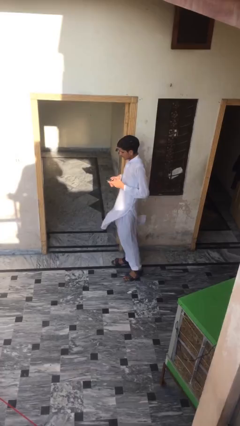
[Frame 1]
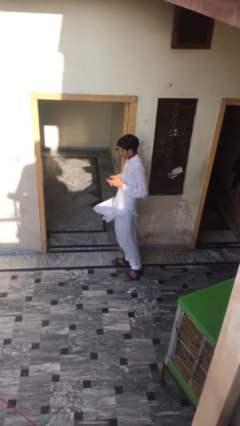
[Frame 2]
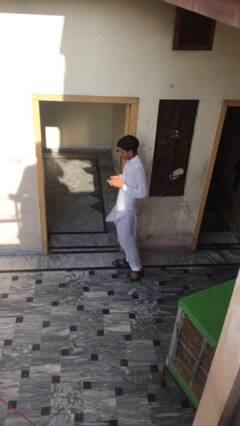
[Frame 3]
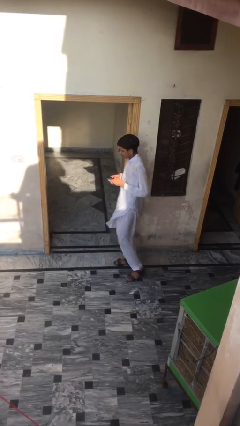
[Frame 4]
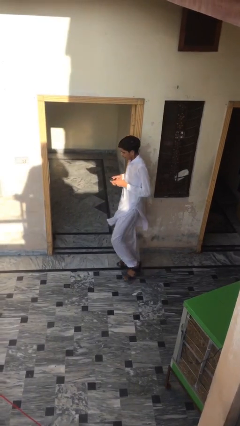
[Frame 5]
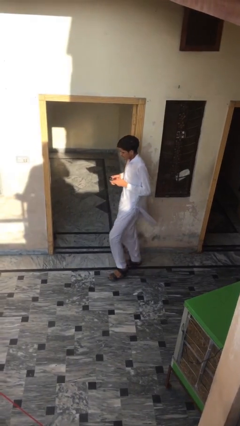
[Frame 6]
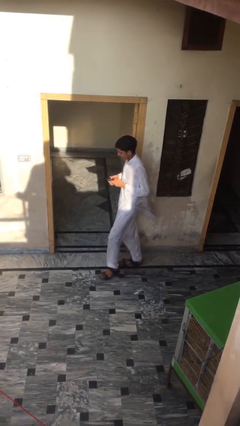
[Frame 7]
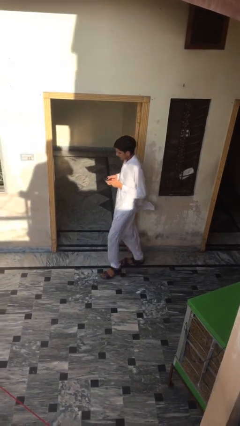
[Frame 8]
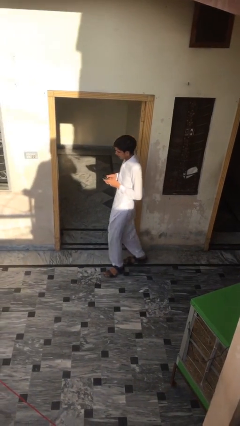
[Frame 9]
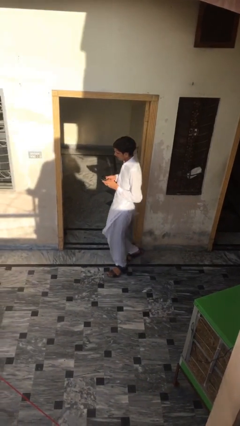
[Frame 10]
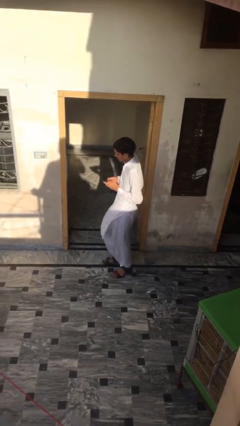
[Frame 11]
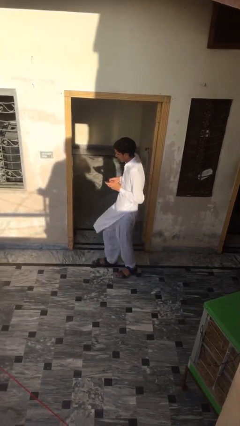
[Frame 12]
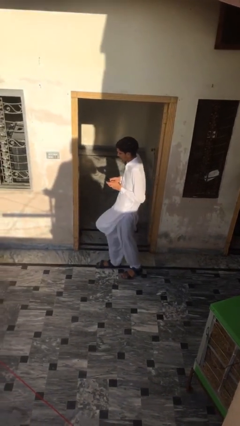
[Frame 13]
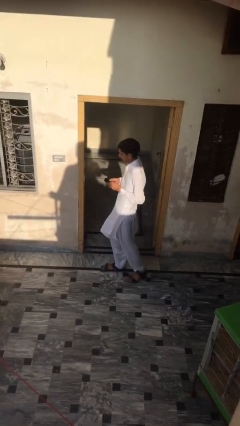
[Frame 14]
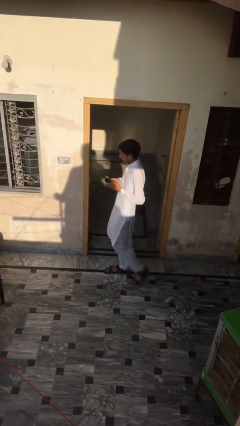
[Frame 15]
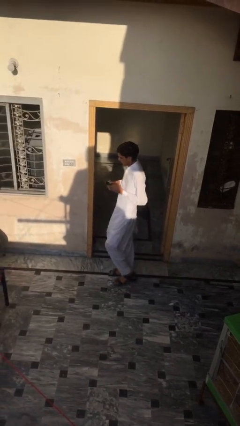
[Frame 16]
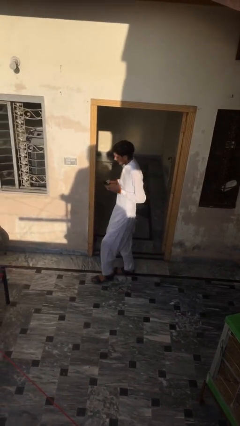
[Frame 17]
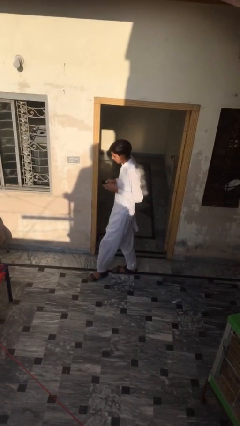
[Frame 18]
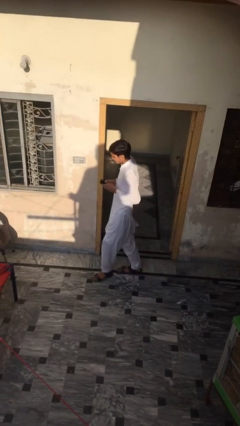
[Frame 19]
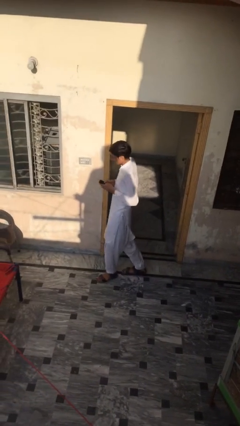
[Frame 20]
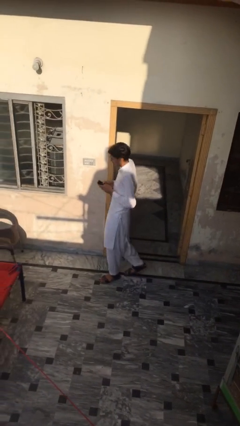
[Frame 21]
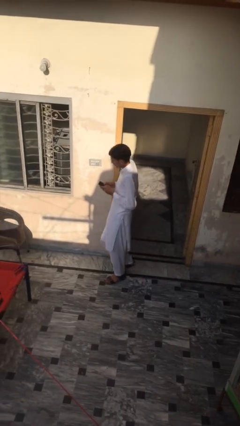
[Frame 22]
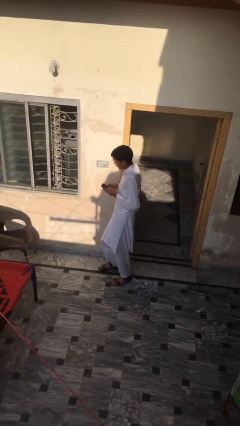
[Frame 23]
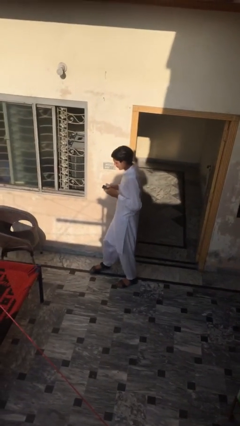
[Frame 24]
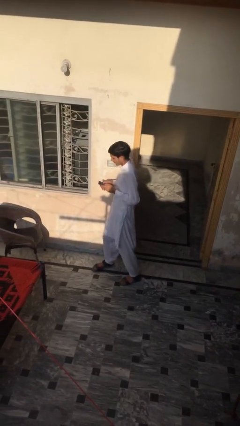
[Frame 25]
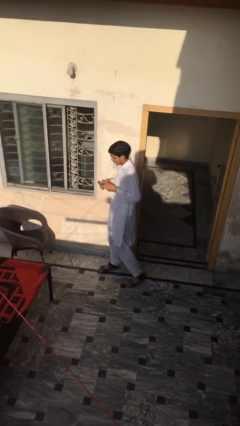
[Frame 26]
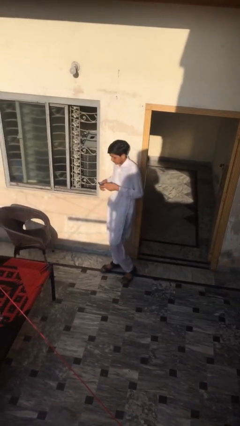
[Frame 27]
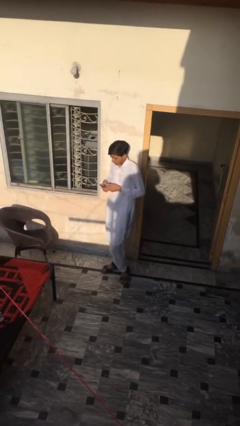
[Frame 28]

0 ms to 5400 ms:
person texts on phone

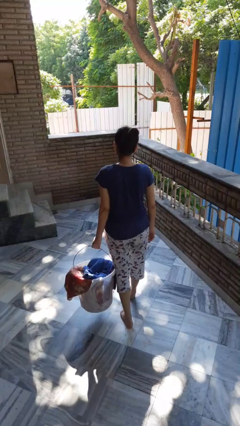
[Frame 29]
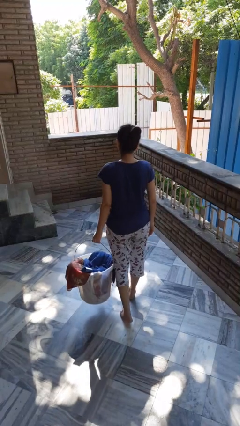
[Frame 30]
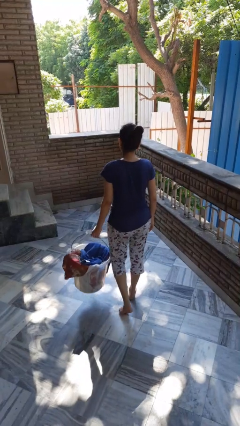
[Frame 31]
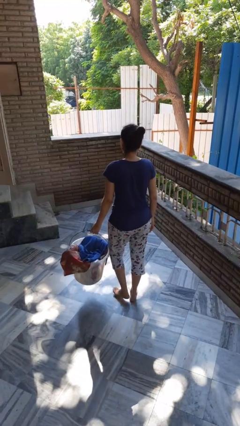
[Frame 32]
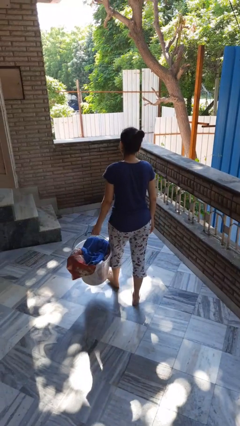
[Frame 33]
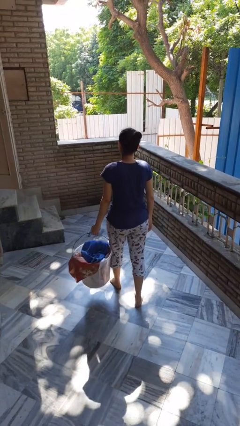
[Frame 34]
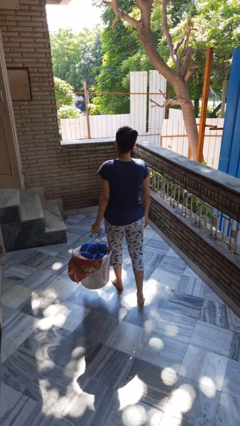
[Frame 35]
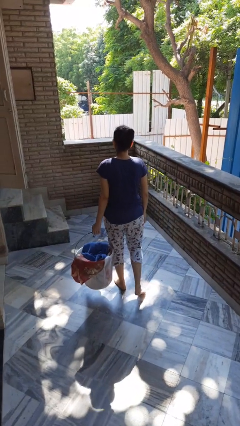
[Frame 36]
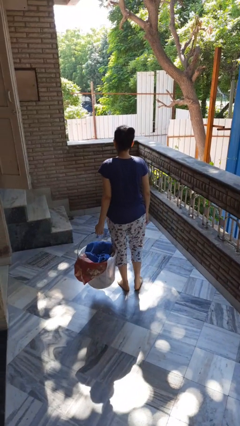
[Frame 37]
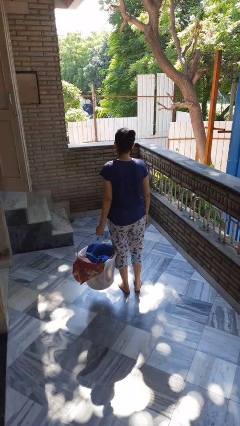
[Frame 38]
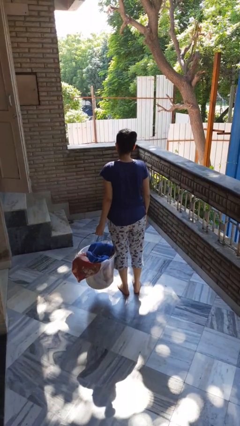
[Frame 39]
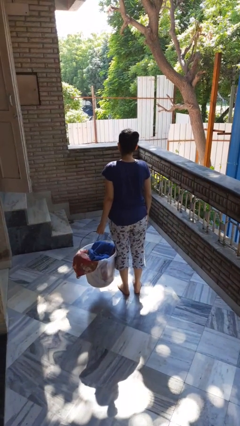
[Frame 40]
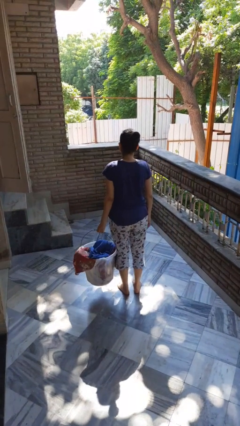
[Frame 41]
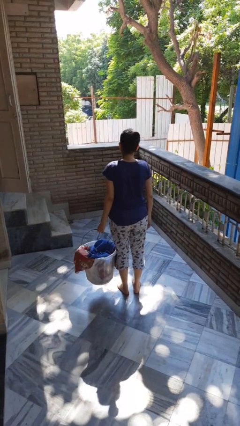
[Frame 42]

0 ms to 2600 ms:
person carries laundry basket

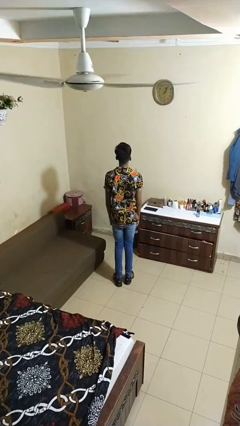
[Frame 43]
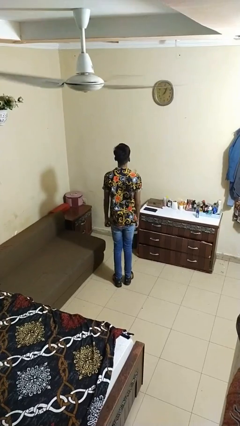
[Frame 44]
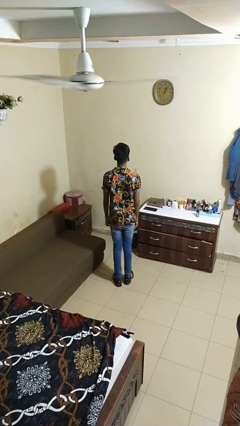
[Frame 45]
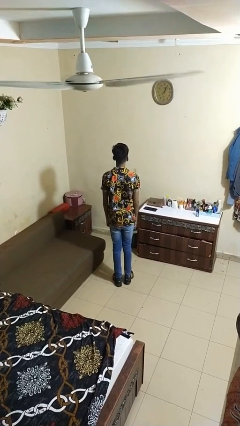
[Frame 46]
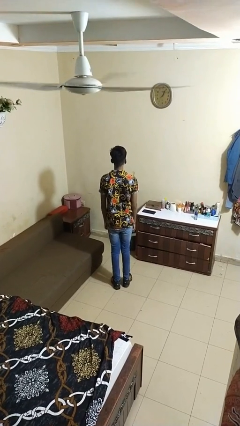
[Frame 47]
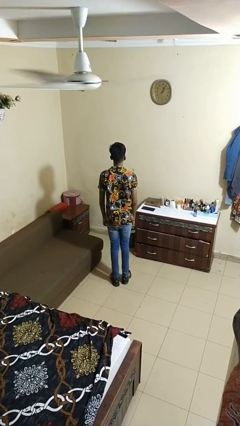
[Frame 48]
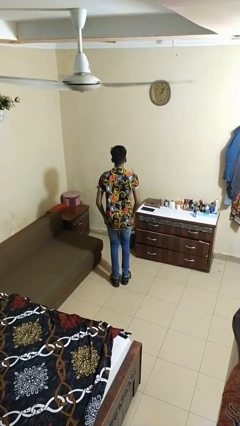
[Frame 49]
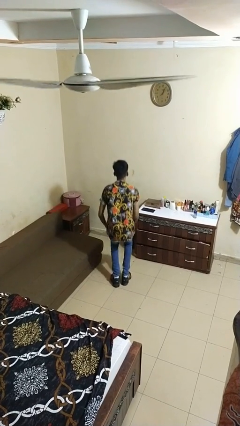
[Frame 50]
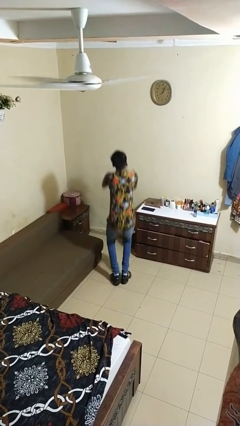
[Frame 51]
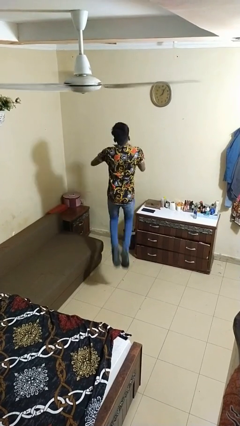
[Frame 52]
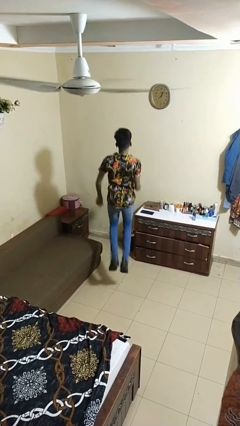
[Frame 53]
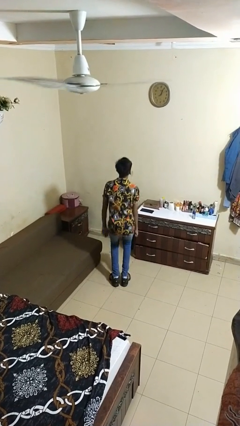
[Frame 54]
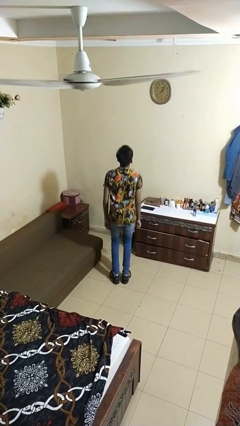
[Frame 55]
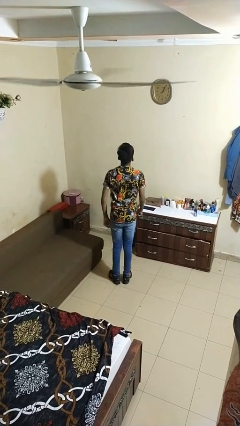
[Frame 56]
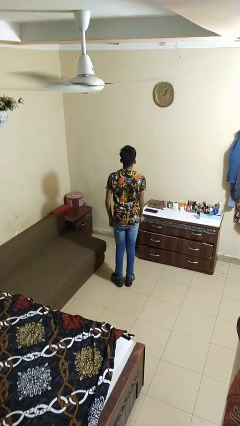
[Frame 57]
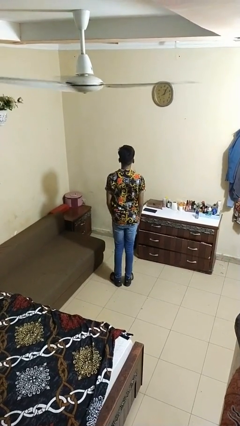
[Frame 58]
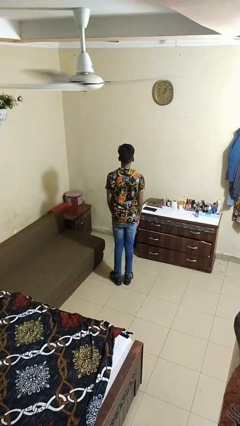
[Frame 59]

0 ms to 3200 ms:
person jumps

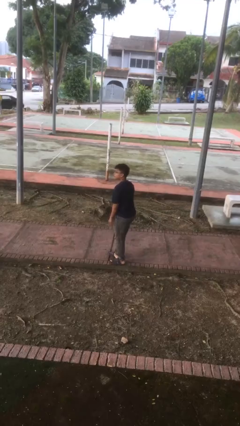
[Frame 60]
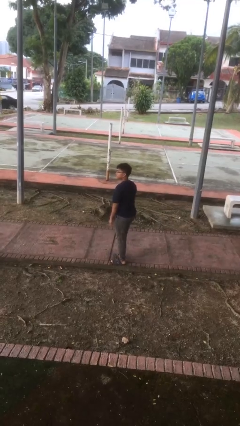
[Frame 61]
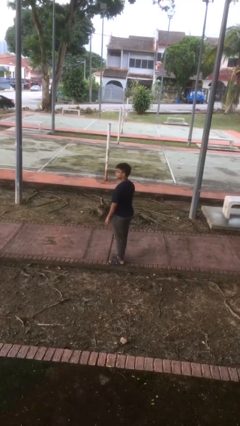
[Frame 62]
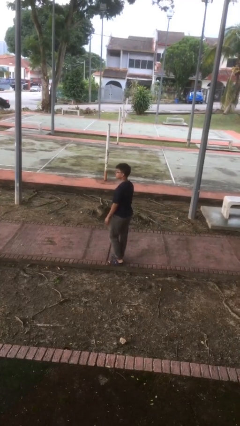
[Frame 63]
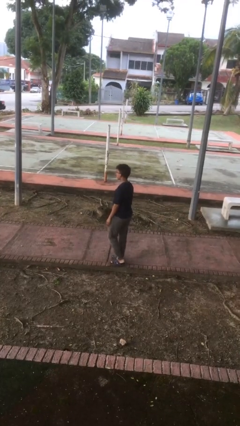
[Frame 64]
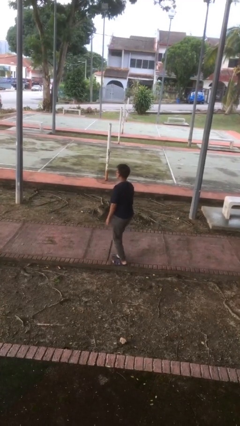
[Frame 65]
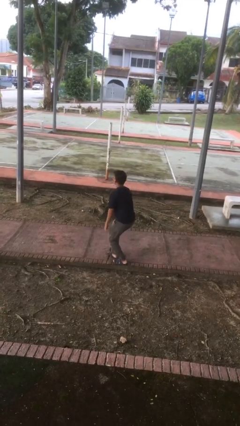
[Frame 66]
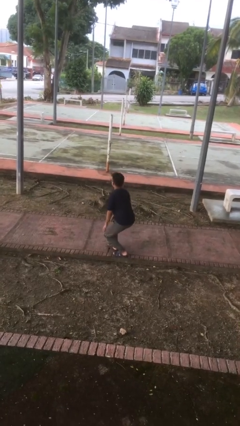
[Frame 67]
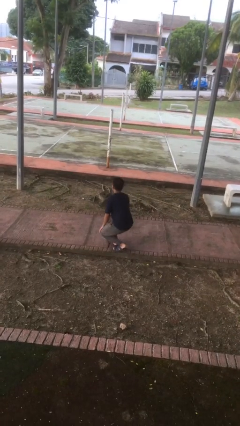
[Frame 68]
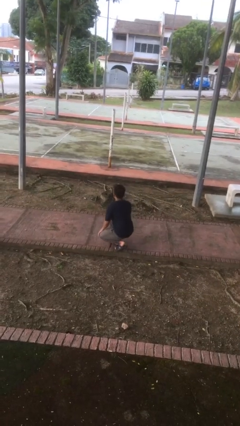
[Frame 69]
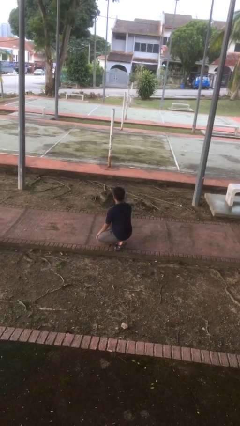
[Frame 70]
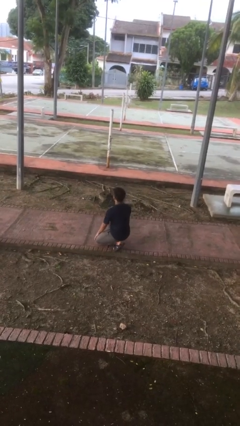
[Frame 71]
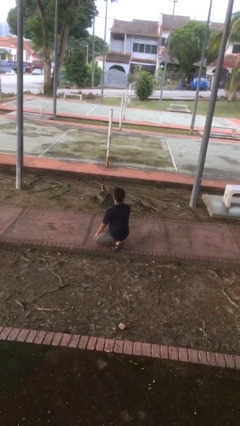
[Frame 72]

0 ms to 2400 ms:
person kneels

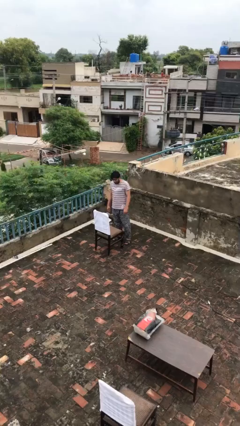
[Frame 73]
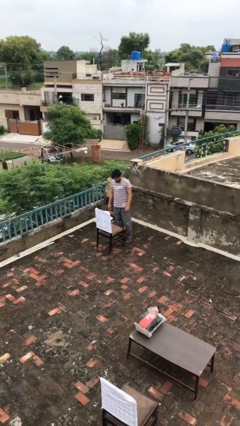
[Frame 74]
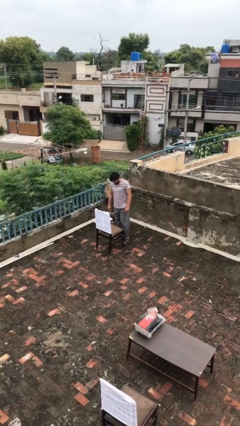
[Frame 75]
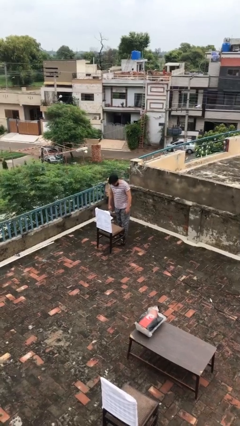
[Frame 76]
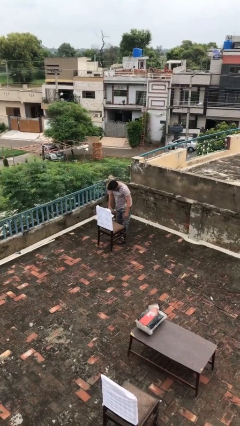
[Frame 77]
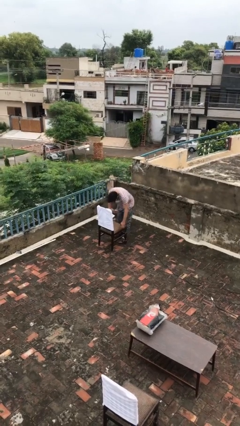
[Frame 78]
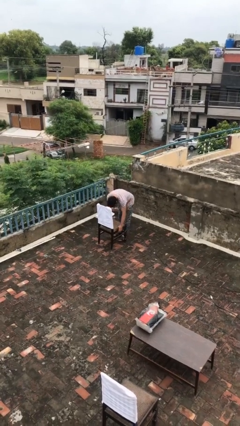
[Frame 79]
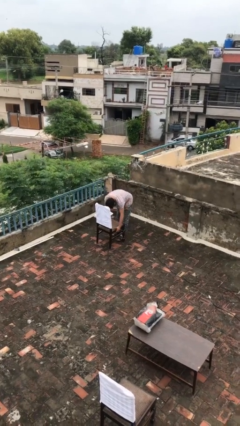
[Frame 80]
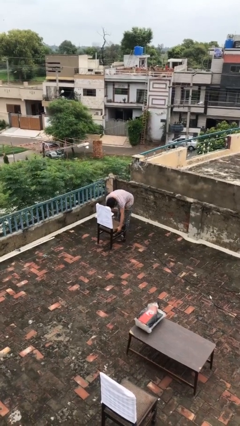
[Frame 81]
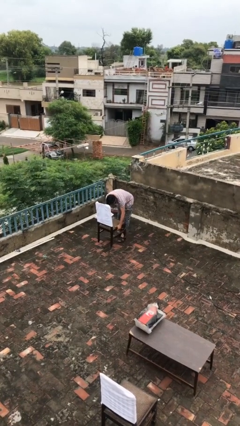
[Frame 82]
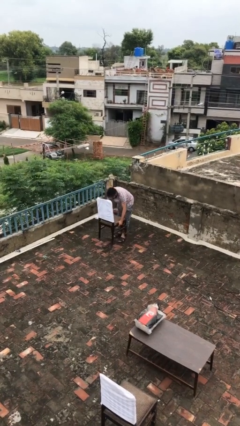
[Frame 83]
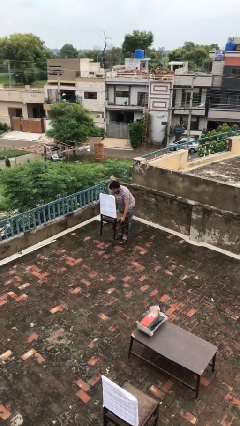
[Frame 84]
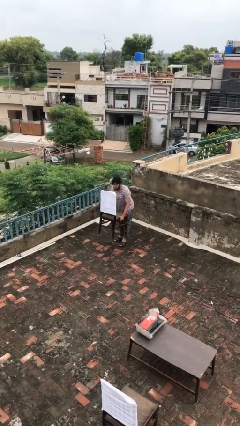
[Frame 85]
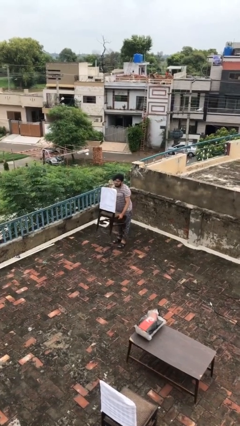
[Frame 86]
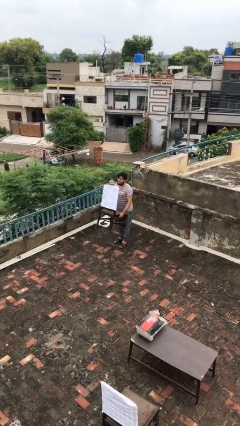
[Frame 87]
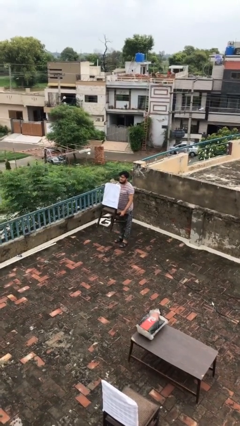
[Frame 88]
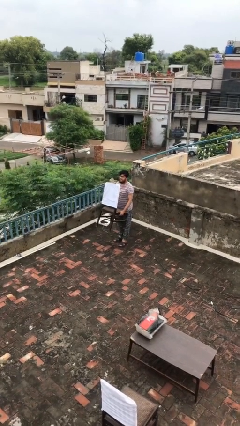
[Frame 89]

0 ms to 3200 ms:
person picks up object from floor

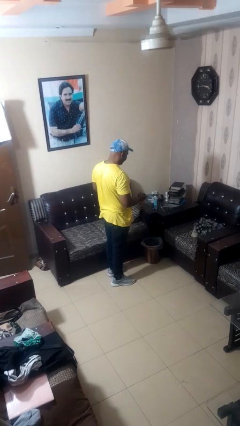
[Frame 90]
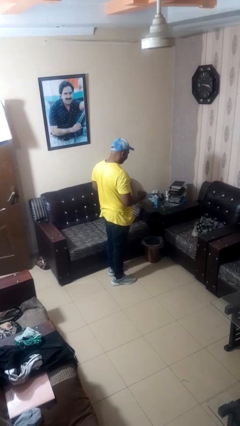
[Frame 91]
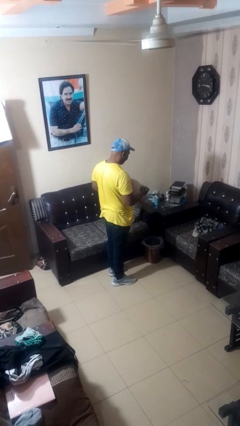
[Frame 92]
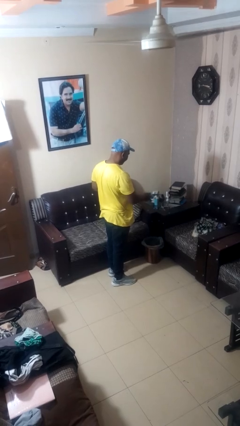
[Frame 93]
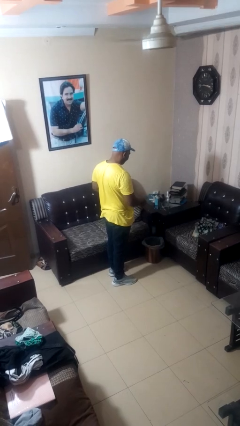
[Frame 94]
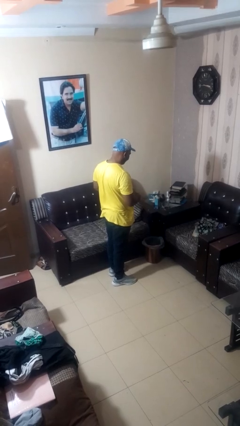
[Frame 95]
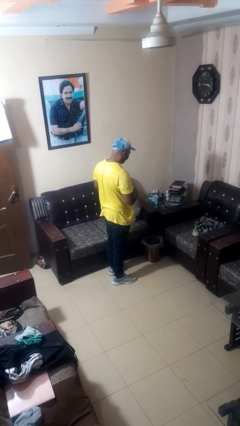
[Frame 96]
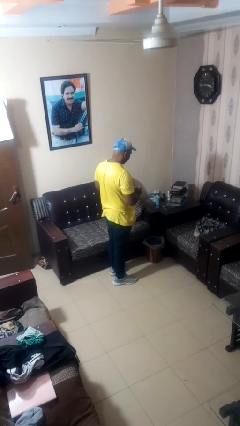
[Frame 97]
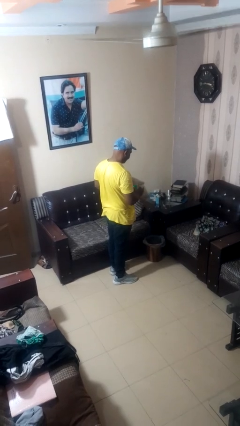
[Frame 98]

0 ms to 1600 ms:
person discards trash
